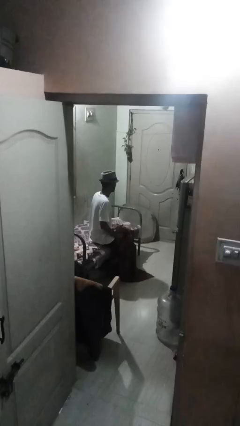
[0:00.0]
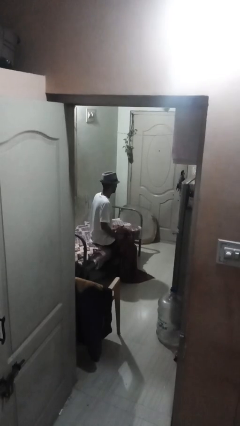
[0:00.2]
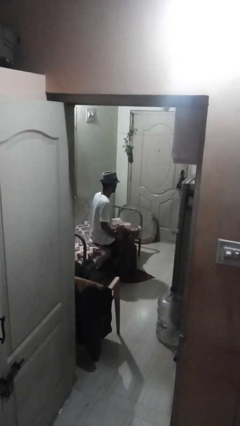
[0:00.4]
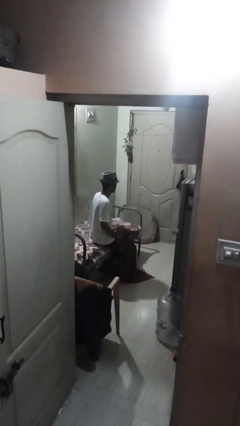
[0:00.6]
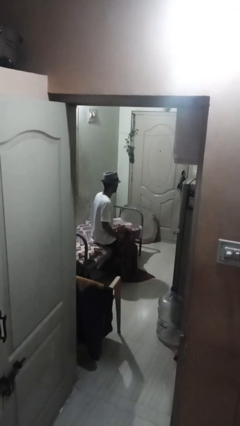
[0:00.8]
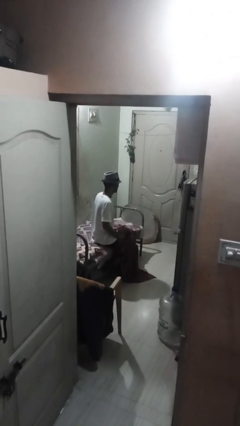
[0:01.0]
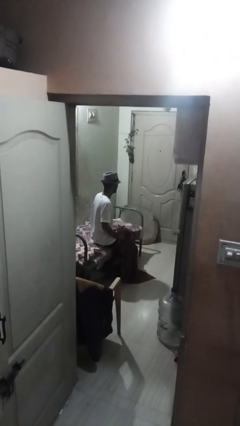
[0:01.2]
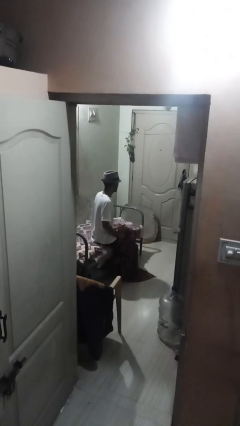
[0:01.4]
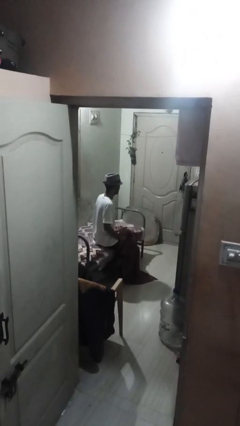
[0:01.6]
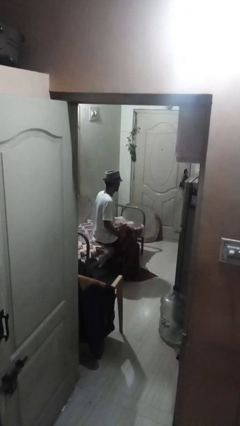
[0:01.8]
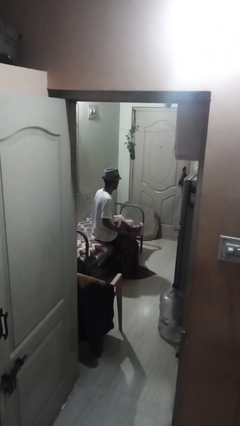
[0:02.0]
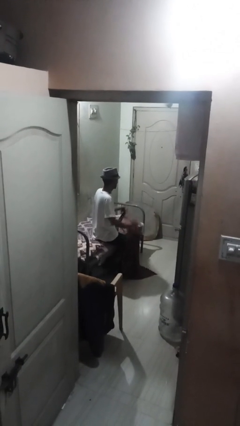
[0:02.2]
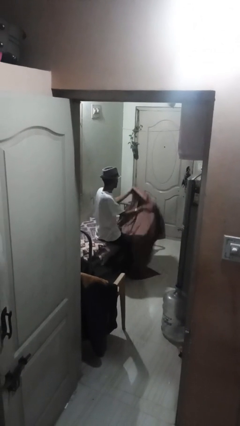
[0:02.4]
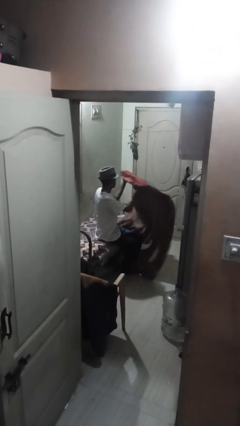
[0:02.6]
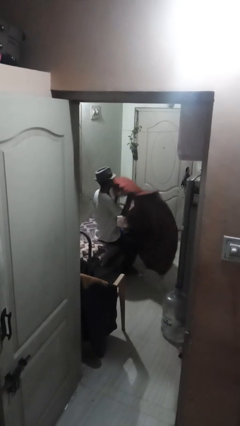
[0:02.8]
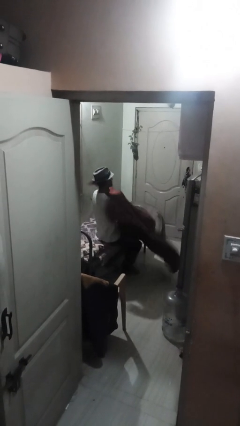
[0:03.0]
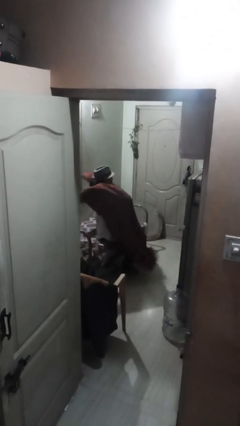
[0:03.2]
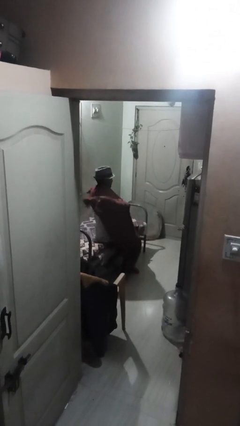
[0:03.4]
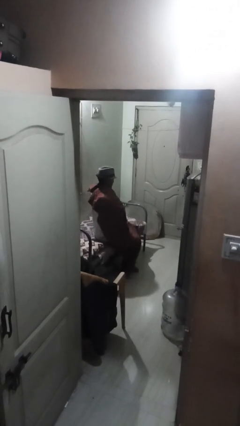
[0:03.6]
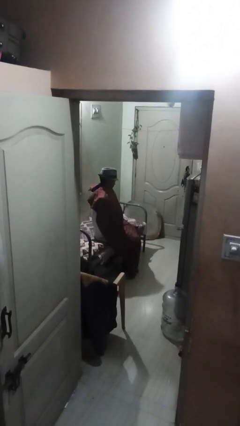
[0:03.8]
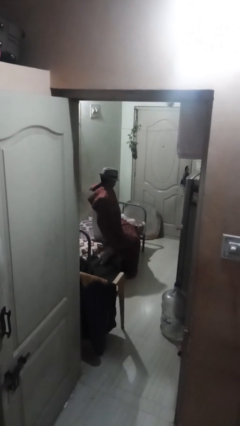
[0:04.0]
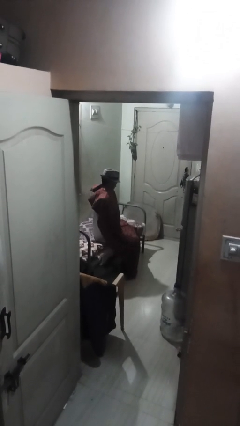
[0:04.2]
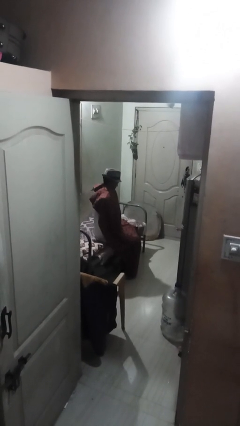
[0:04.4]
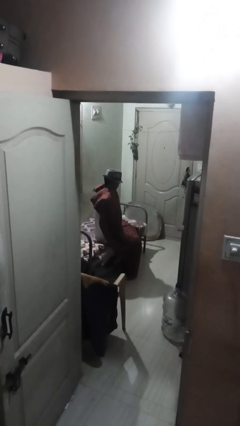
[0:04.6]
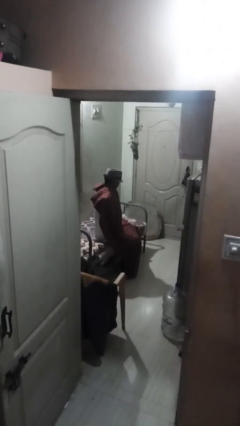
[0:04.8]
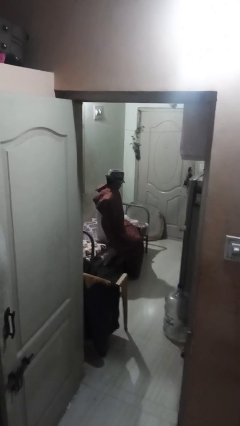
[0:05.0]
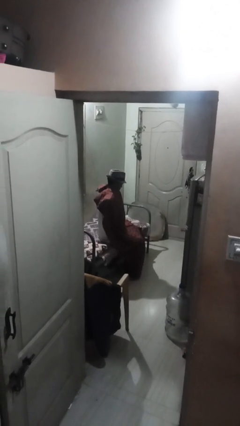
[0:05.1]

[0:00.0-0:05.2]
person covers with blanket

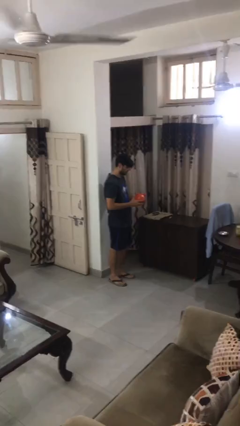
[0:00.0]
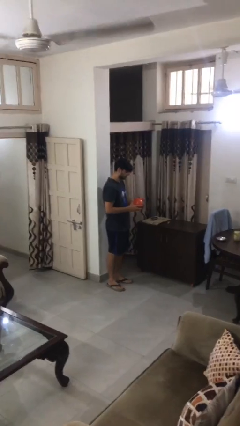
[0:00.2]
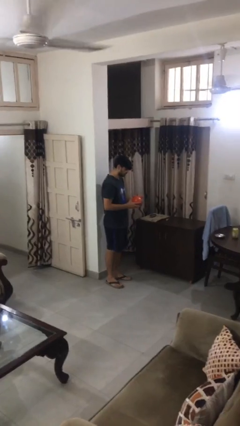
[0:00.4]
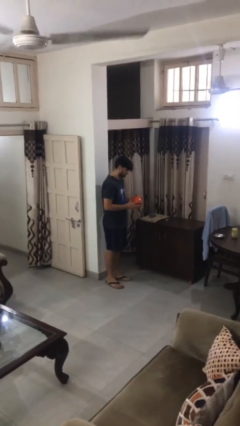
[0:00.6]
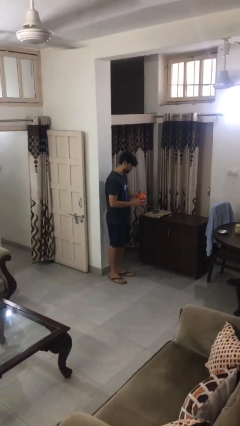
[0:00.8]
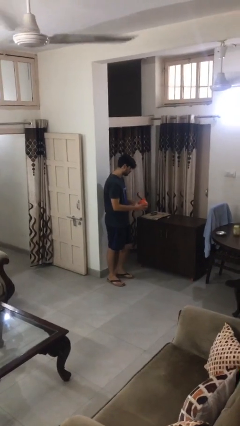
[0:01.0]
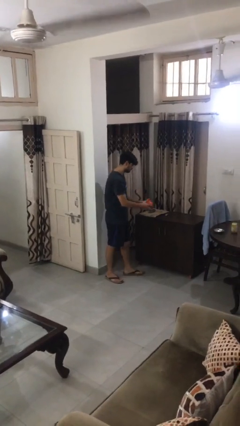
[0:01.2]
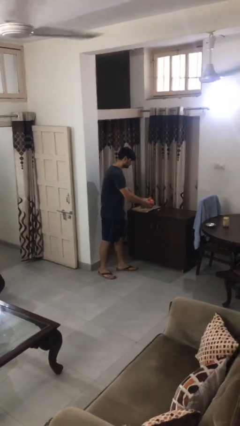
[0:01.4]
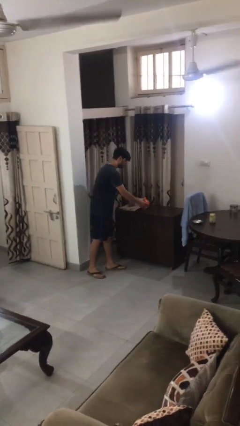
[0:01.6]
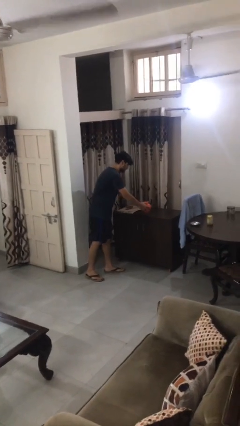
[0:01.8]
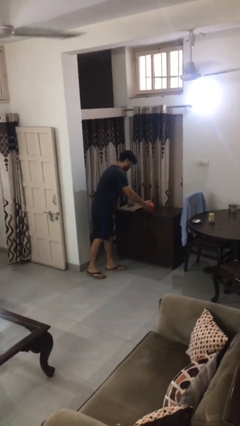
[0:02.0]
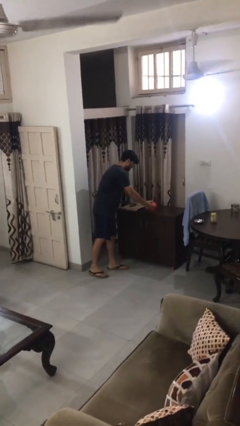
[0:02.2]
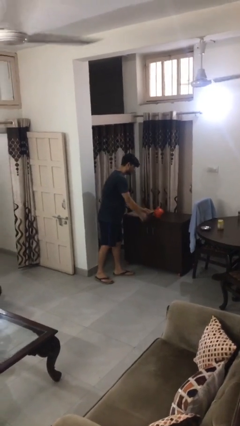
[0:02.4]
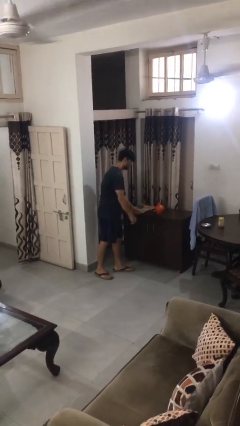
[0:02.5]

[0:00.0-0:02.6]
person puts down object on countertop

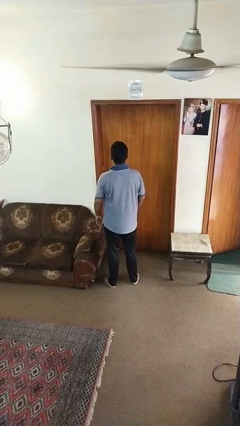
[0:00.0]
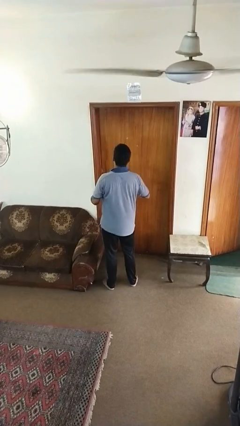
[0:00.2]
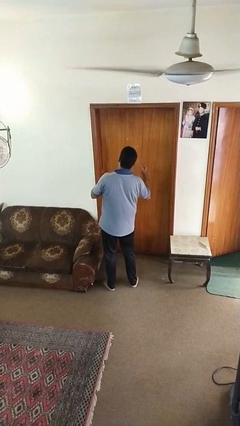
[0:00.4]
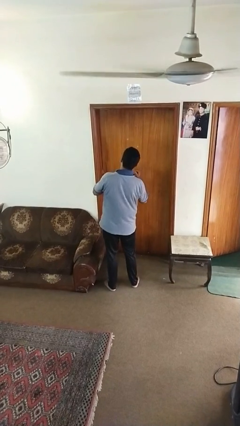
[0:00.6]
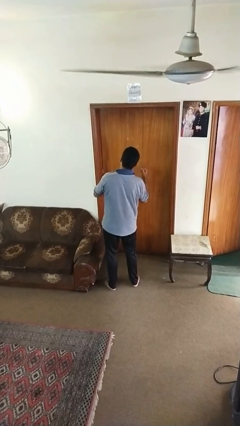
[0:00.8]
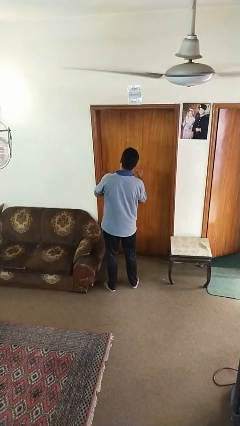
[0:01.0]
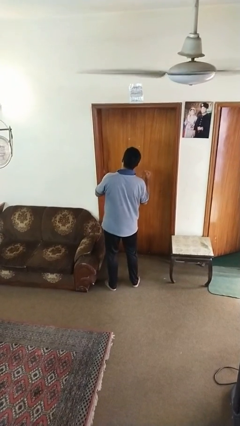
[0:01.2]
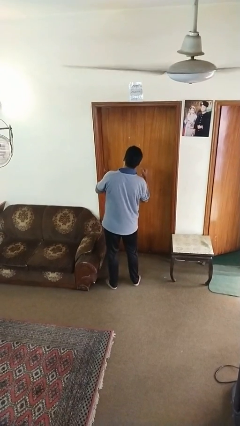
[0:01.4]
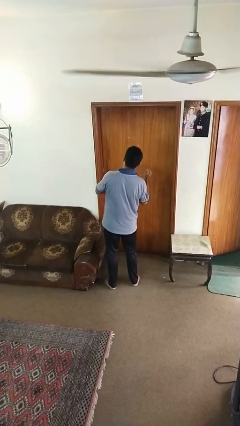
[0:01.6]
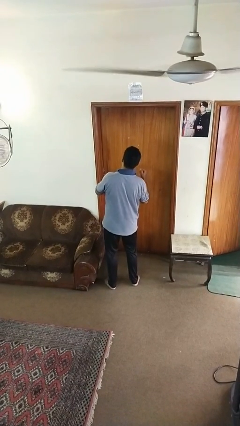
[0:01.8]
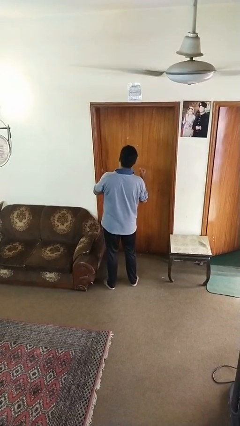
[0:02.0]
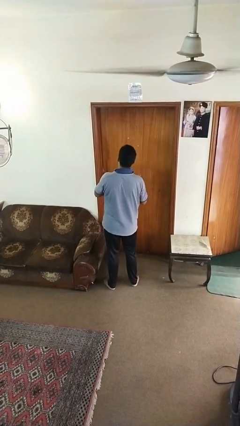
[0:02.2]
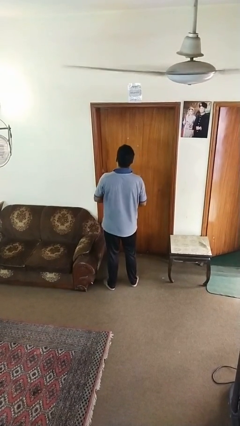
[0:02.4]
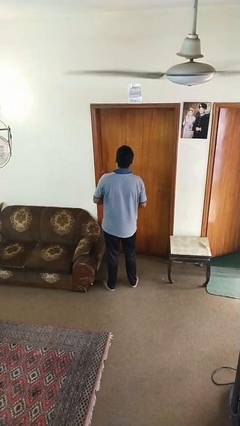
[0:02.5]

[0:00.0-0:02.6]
person dances in place

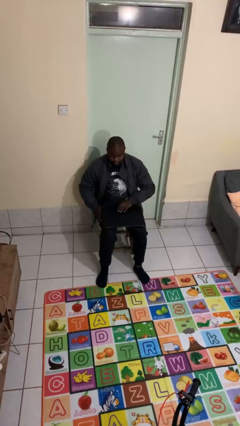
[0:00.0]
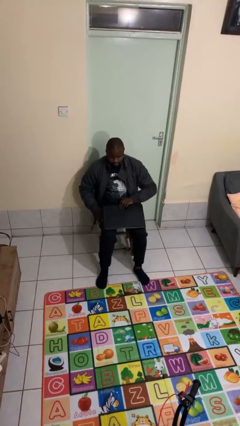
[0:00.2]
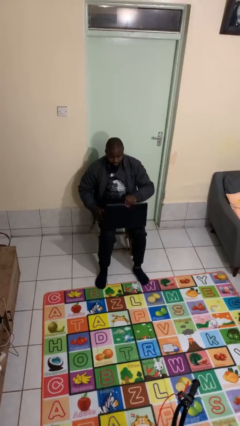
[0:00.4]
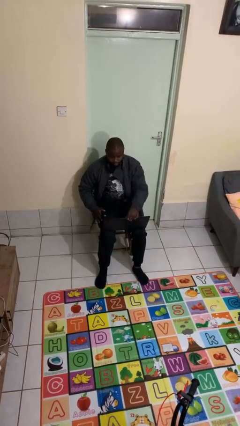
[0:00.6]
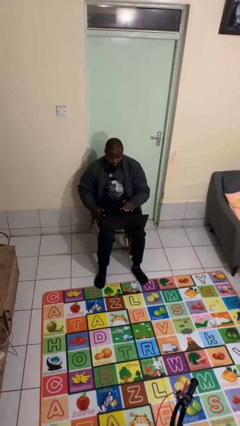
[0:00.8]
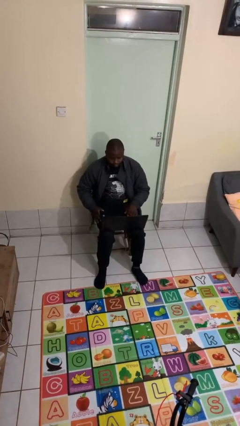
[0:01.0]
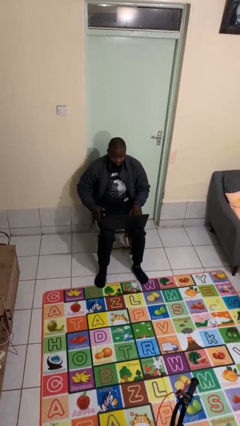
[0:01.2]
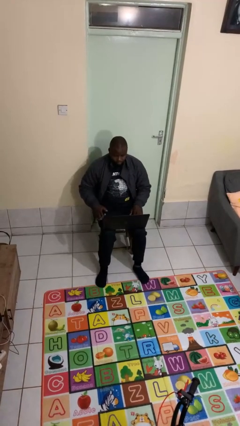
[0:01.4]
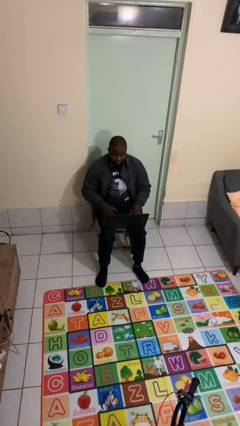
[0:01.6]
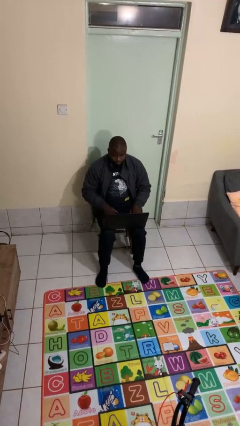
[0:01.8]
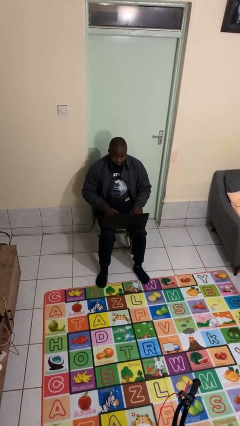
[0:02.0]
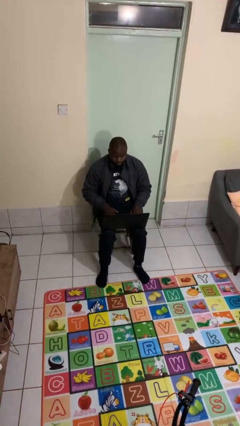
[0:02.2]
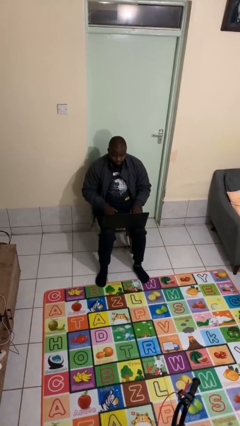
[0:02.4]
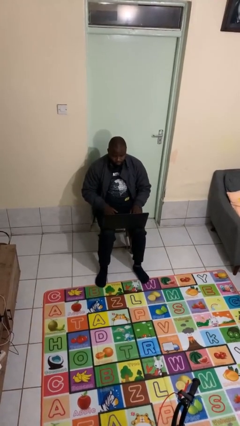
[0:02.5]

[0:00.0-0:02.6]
person opens laptop

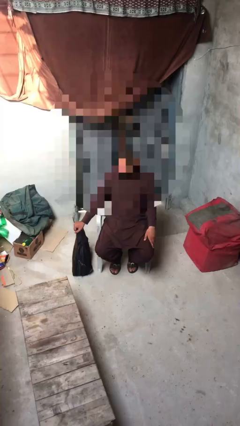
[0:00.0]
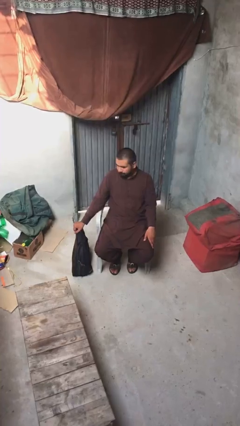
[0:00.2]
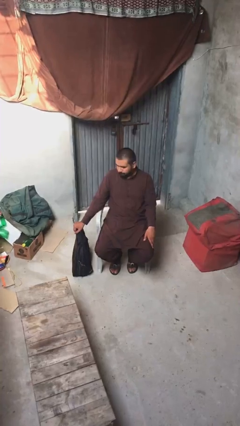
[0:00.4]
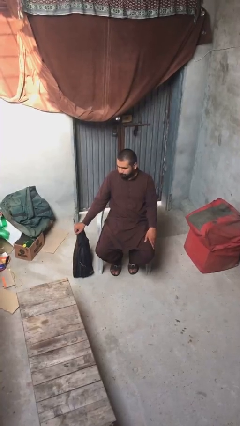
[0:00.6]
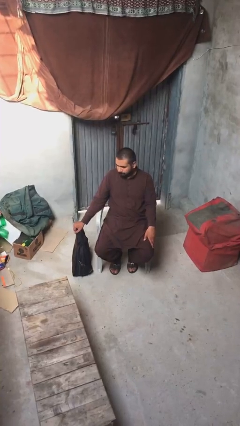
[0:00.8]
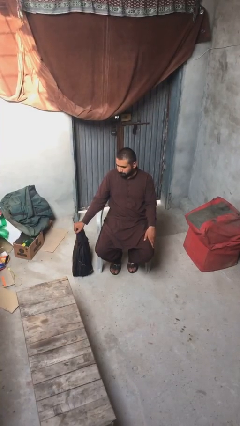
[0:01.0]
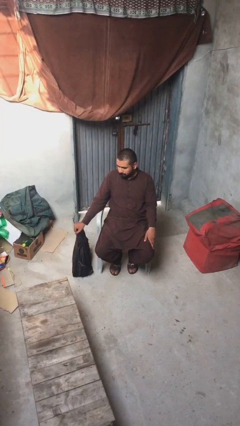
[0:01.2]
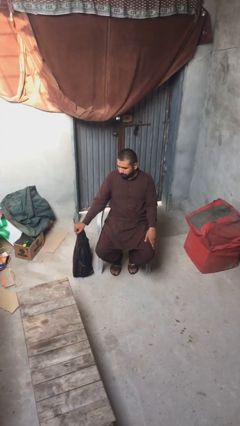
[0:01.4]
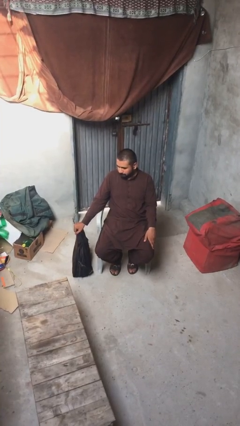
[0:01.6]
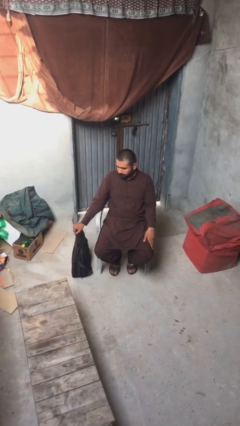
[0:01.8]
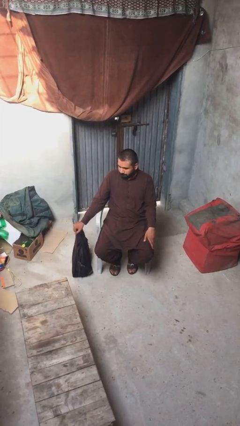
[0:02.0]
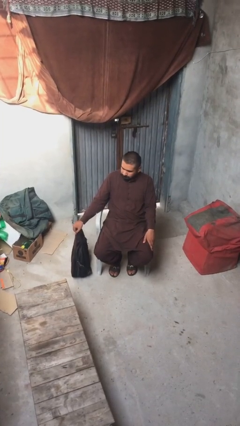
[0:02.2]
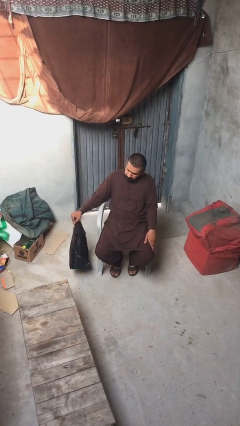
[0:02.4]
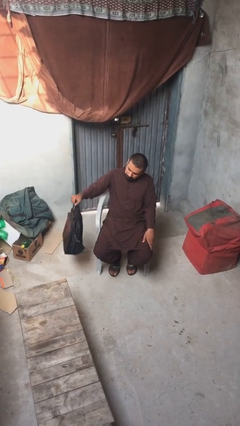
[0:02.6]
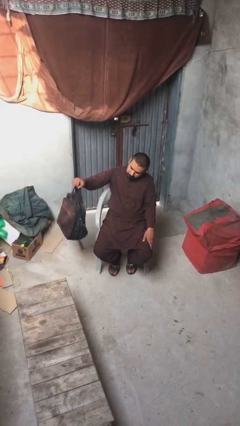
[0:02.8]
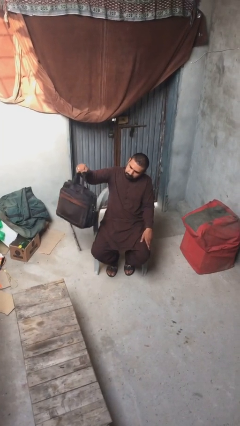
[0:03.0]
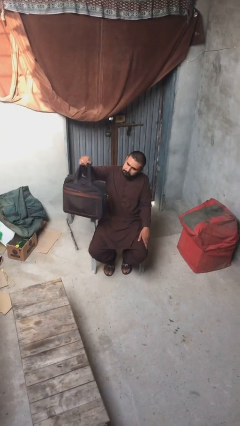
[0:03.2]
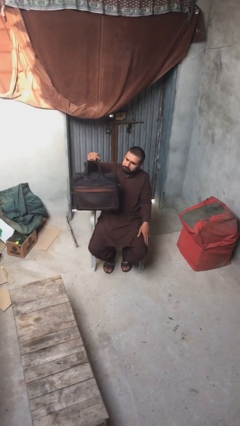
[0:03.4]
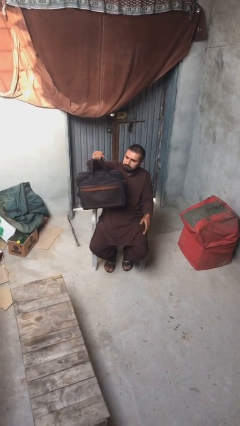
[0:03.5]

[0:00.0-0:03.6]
person picks up object from floor

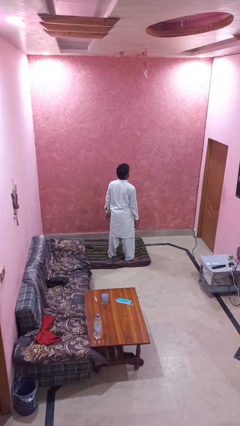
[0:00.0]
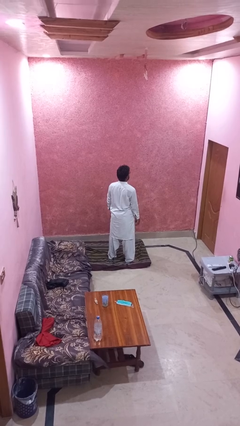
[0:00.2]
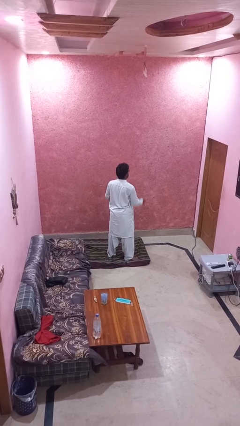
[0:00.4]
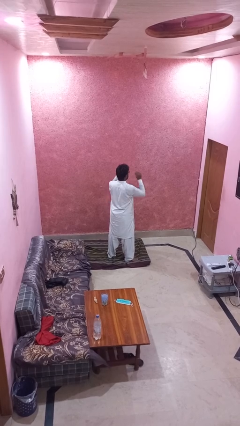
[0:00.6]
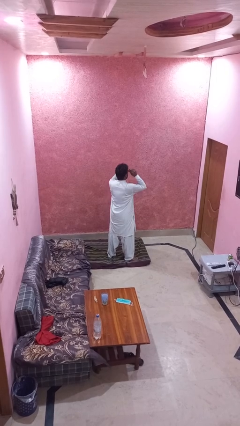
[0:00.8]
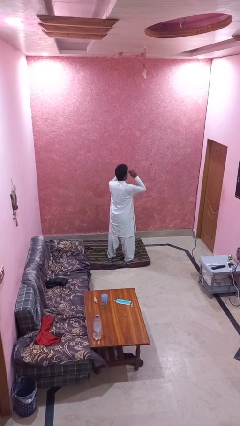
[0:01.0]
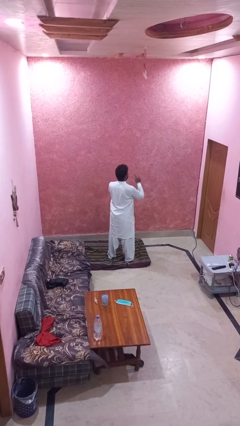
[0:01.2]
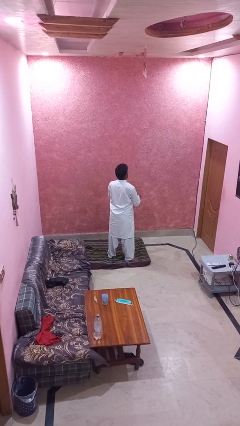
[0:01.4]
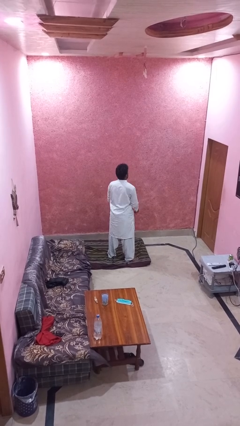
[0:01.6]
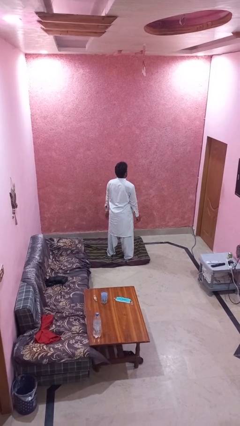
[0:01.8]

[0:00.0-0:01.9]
person takes off glasses
